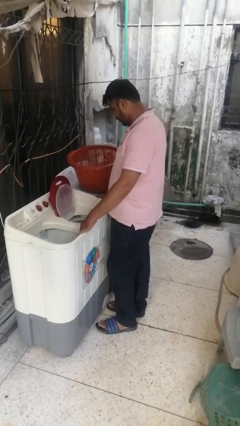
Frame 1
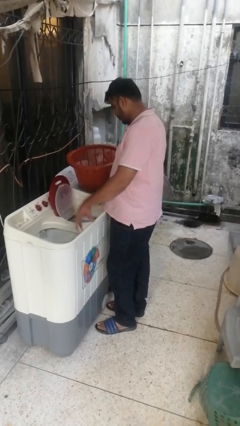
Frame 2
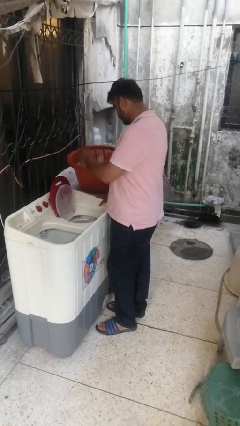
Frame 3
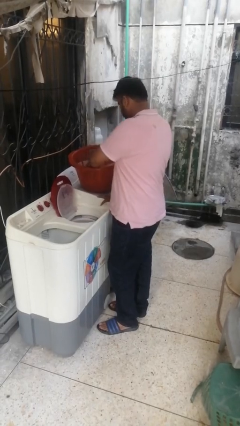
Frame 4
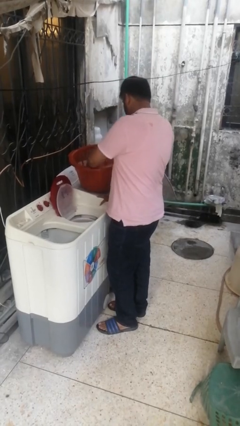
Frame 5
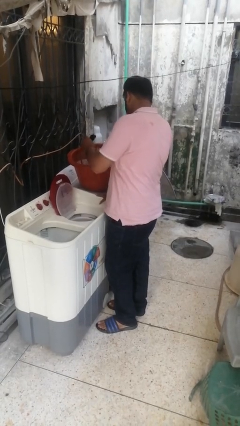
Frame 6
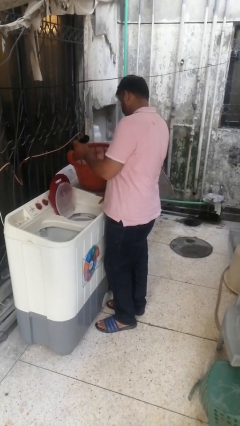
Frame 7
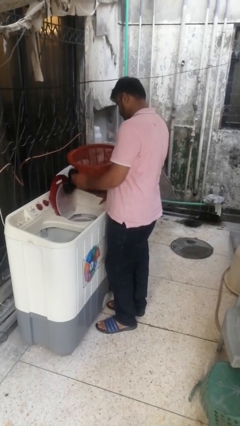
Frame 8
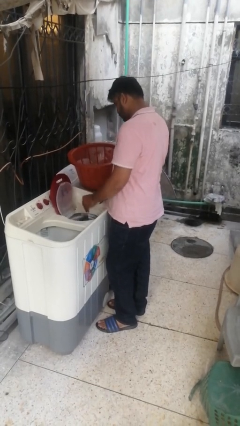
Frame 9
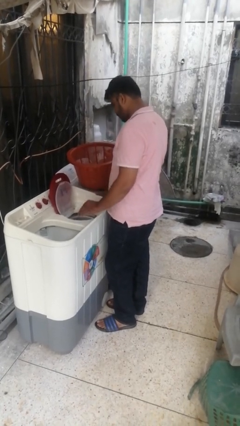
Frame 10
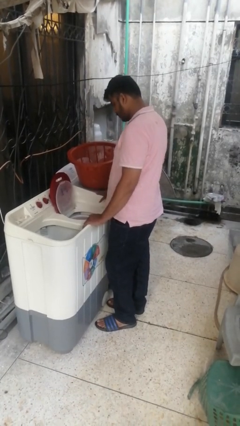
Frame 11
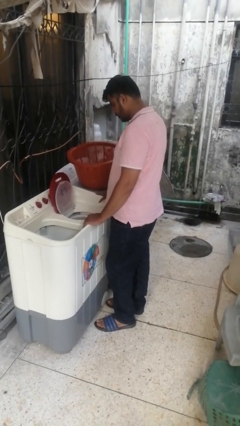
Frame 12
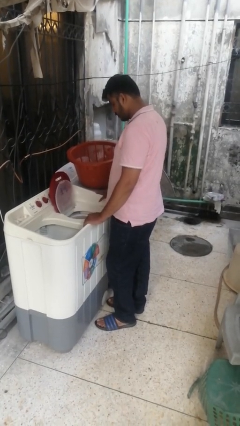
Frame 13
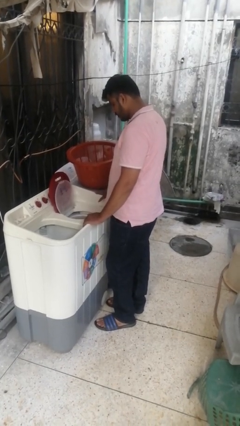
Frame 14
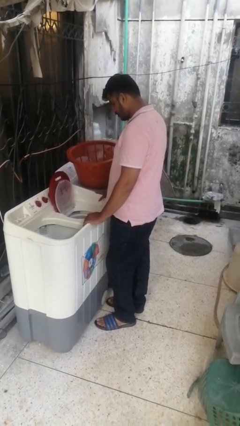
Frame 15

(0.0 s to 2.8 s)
person loads dryer

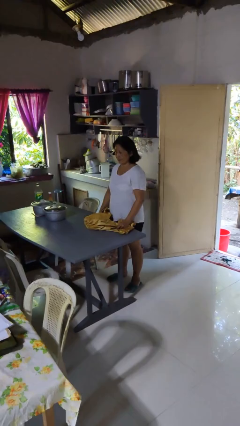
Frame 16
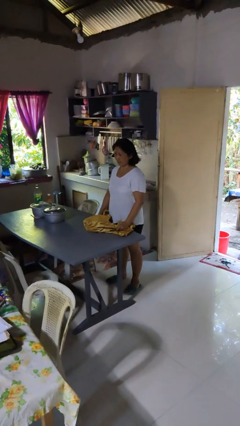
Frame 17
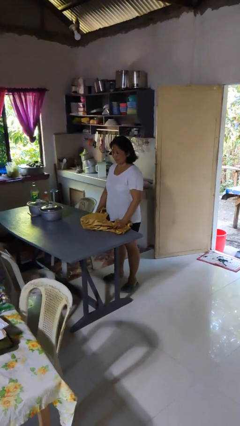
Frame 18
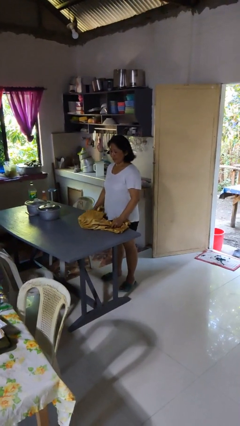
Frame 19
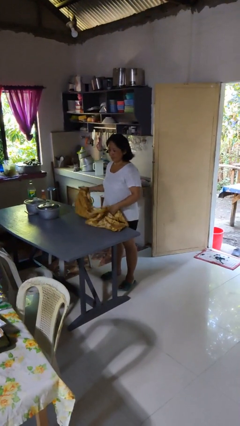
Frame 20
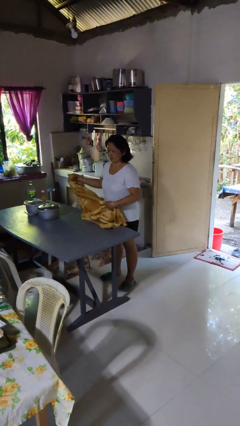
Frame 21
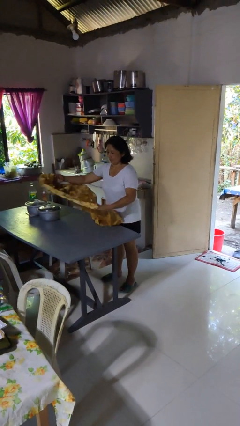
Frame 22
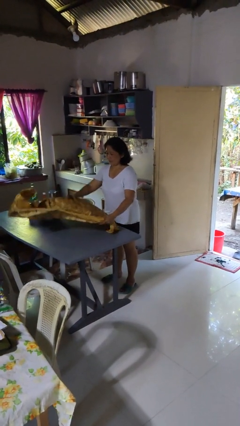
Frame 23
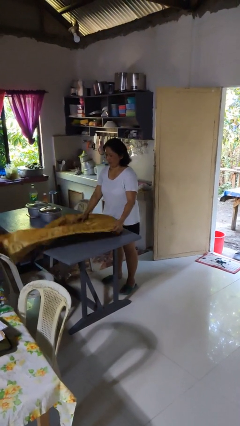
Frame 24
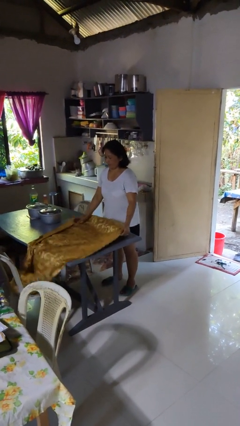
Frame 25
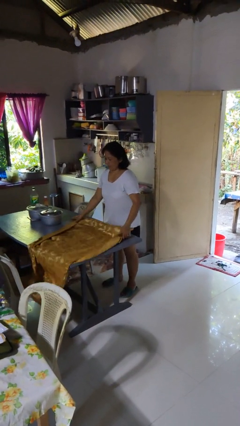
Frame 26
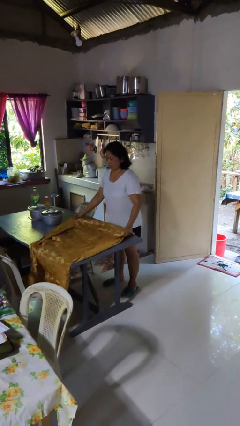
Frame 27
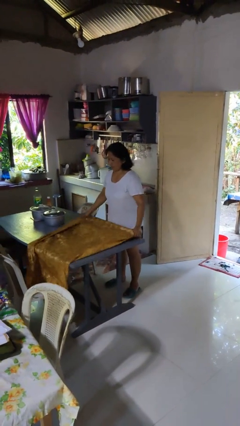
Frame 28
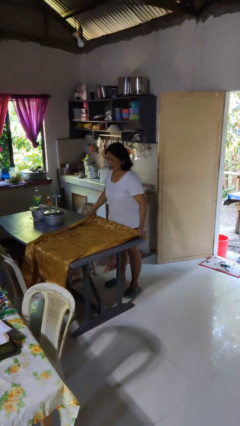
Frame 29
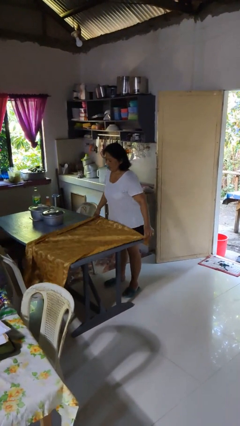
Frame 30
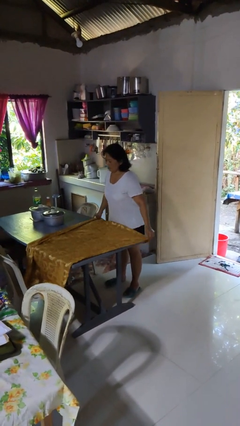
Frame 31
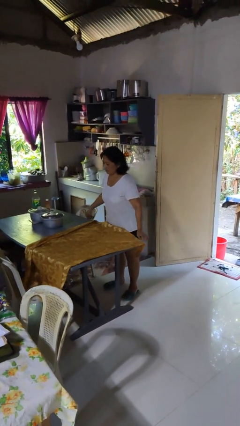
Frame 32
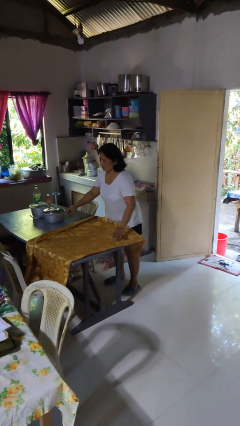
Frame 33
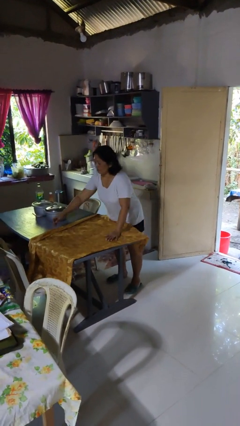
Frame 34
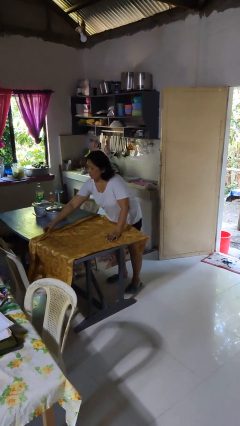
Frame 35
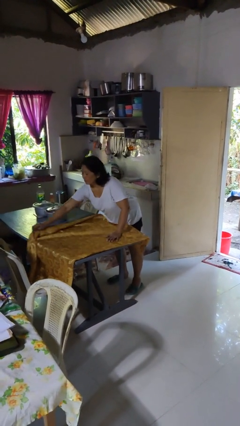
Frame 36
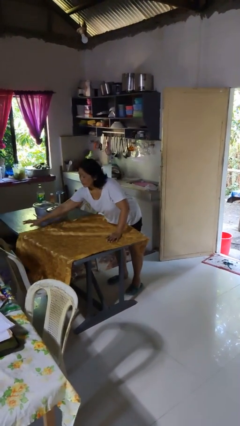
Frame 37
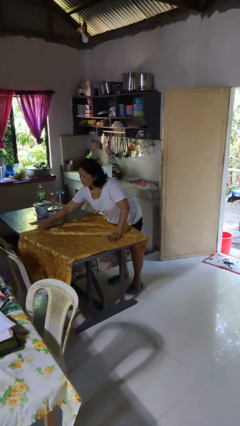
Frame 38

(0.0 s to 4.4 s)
person spreads tablecloth

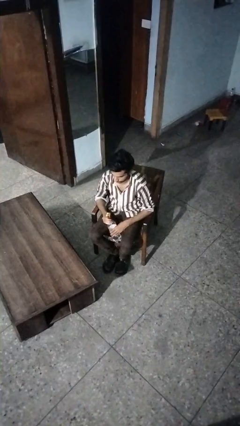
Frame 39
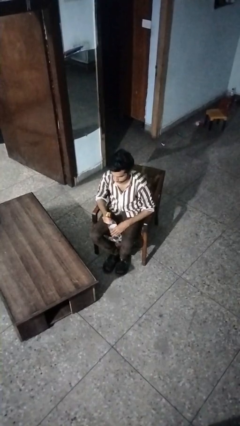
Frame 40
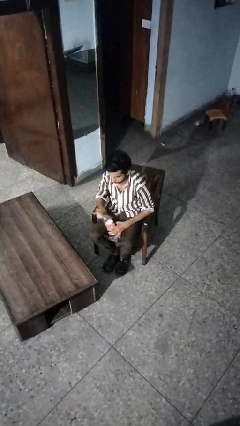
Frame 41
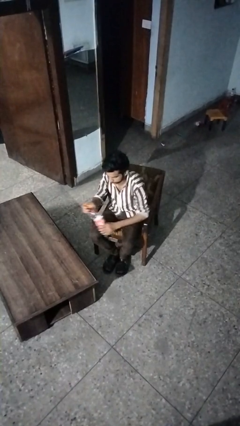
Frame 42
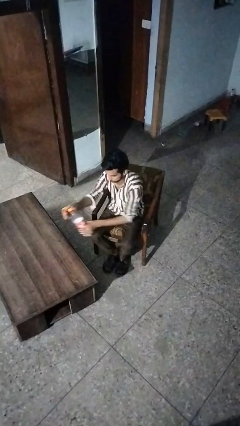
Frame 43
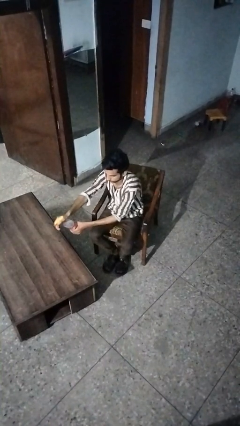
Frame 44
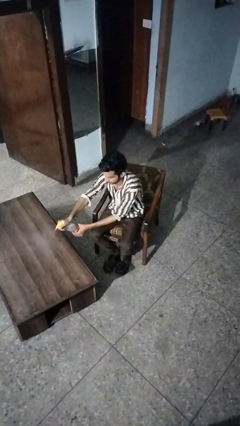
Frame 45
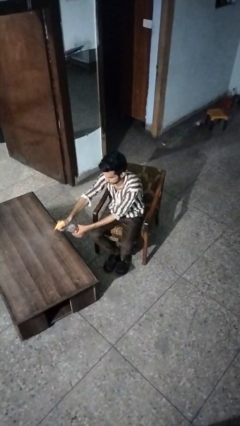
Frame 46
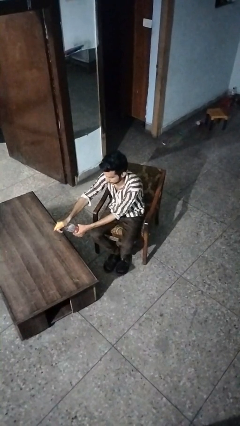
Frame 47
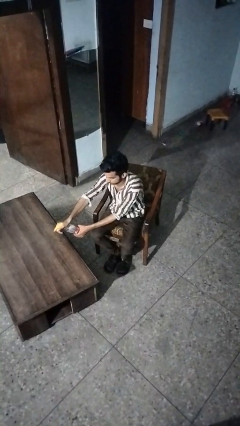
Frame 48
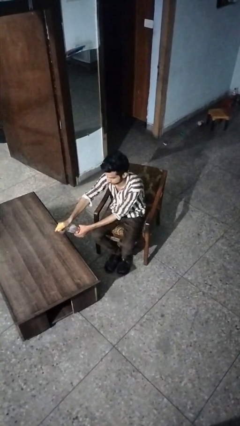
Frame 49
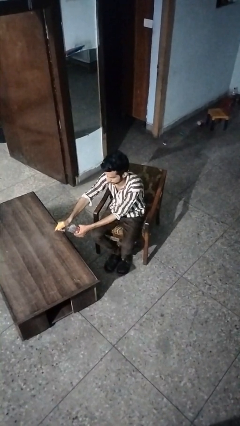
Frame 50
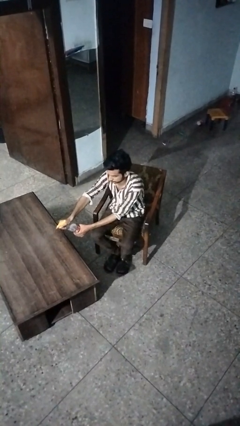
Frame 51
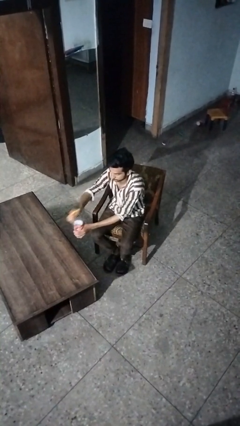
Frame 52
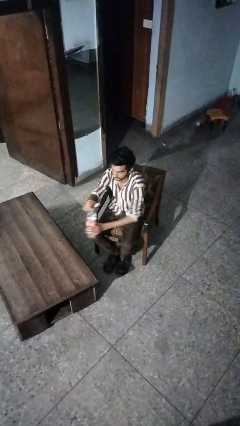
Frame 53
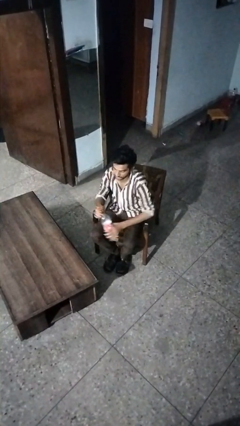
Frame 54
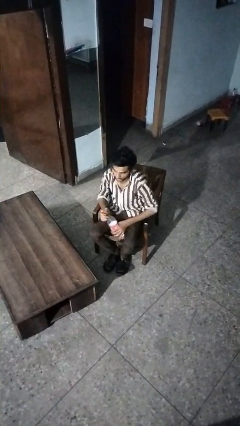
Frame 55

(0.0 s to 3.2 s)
person sprays from bottle

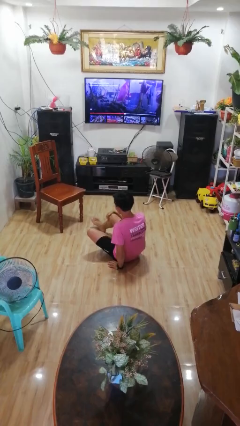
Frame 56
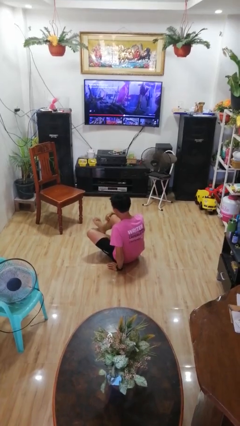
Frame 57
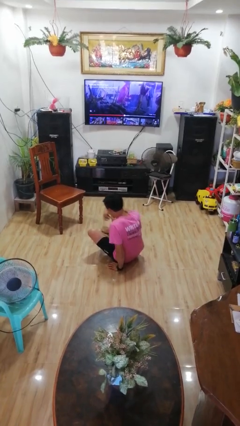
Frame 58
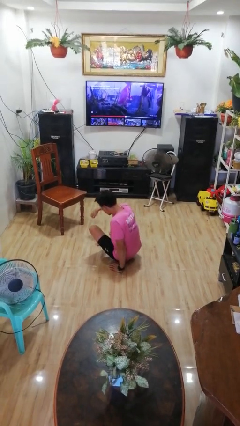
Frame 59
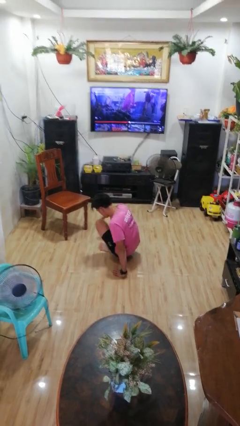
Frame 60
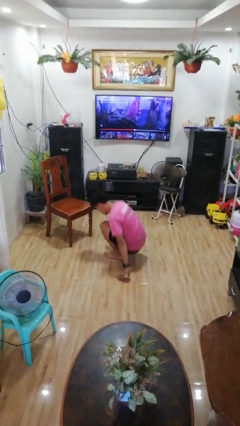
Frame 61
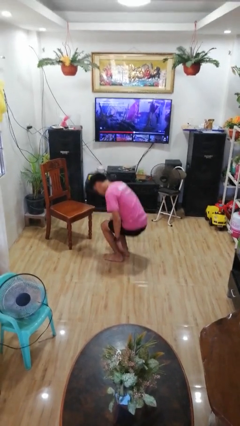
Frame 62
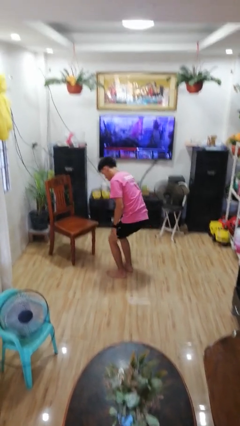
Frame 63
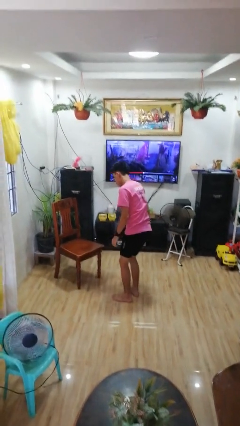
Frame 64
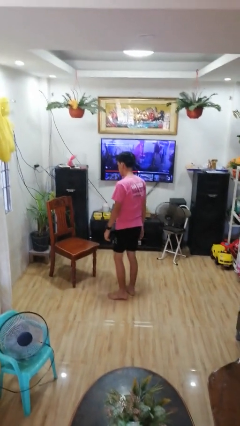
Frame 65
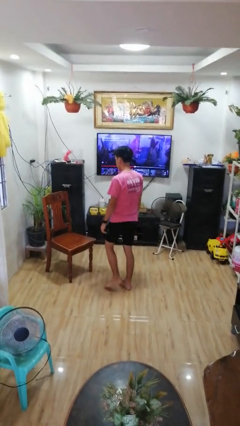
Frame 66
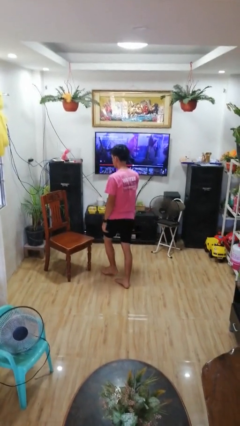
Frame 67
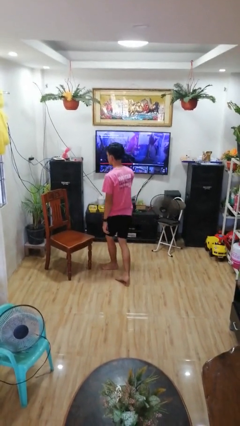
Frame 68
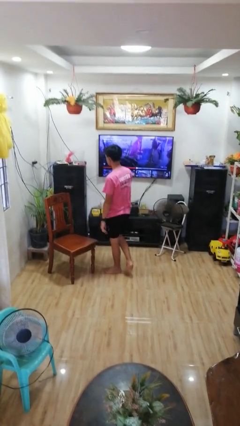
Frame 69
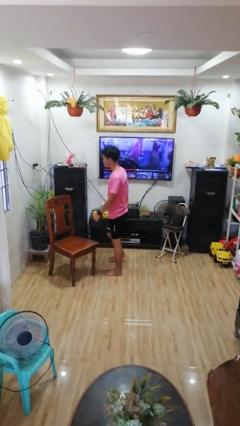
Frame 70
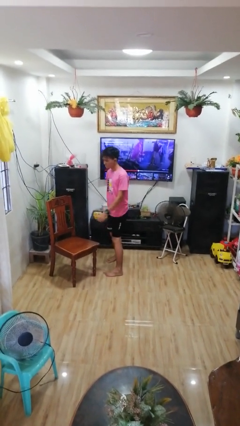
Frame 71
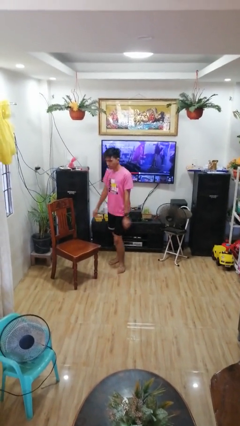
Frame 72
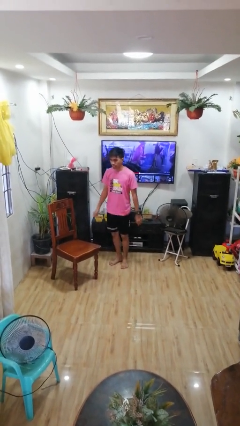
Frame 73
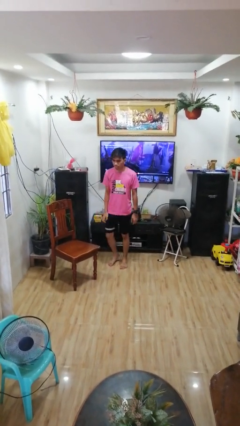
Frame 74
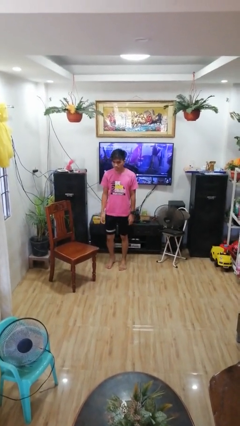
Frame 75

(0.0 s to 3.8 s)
person stands up from floor

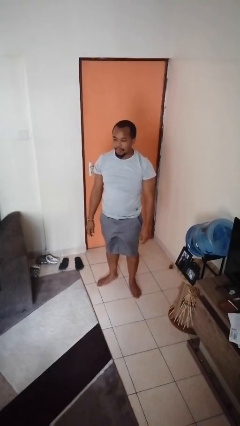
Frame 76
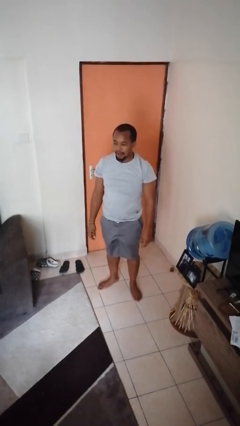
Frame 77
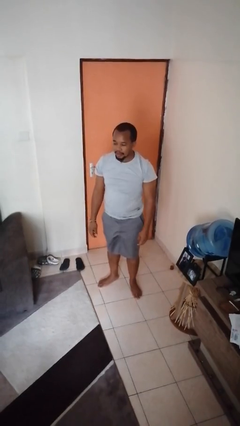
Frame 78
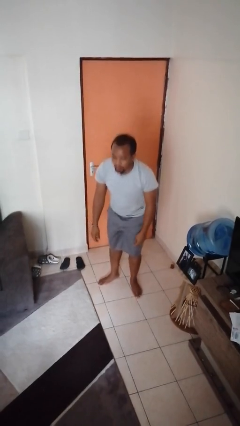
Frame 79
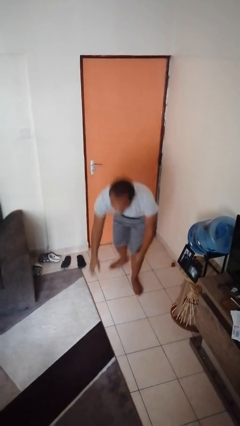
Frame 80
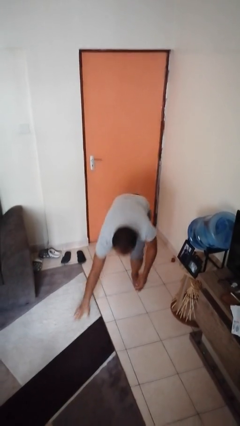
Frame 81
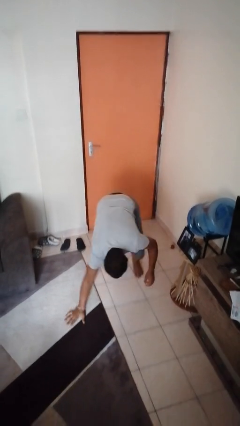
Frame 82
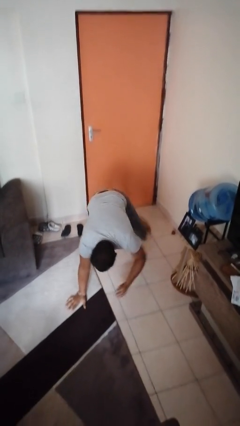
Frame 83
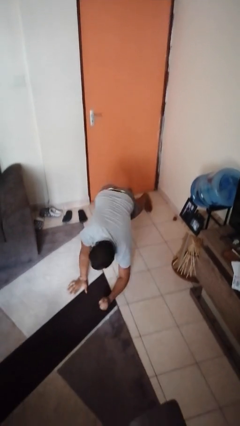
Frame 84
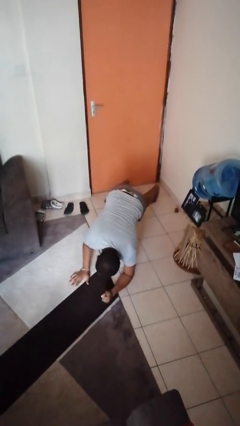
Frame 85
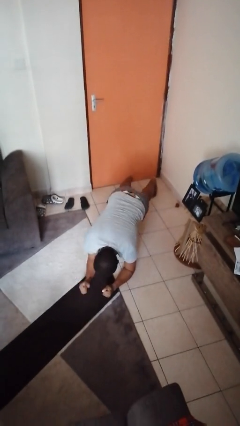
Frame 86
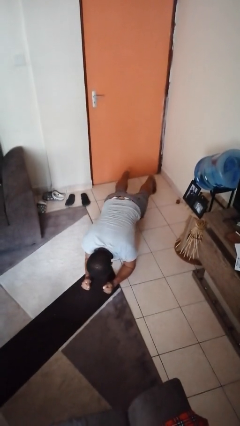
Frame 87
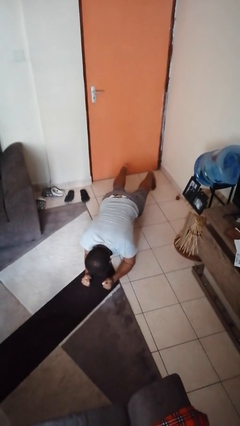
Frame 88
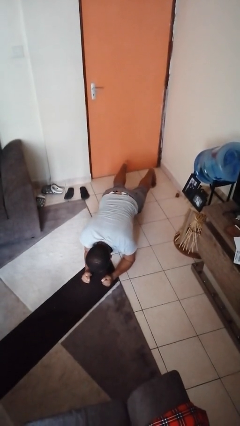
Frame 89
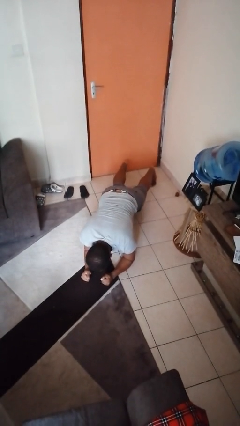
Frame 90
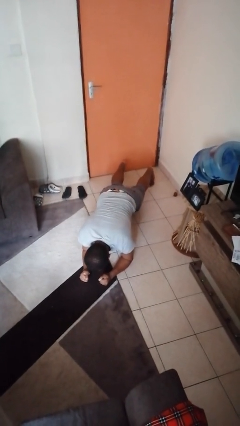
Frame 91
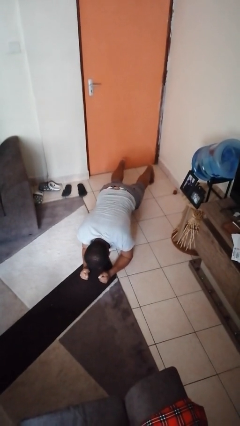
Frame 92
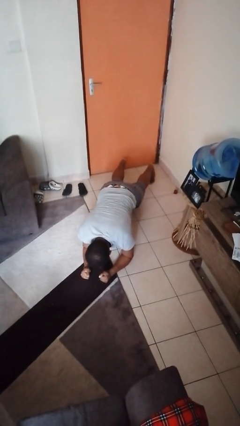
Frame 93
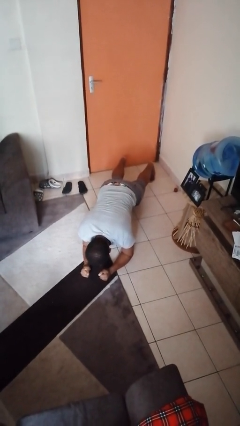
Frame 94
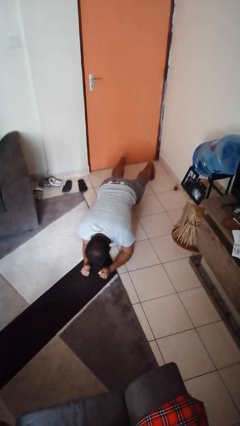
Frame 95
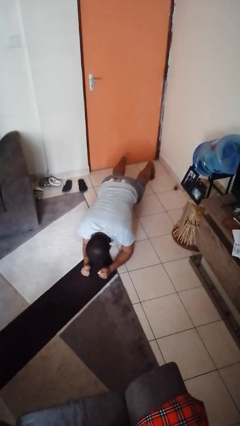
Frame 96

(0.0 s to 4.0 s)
person exercises with plank
